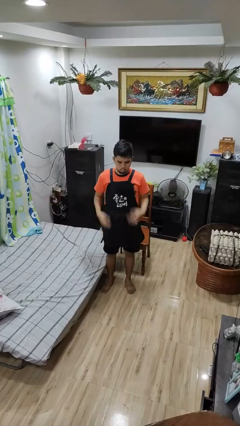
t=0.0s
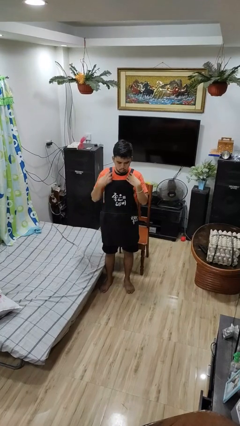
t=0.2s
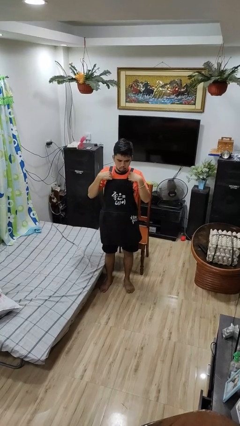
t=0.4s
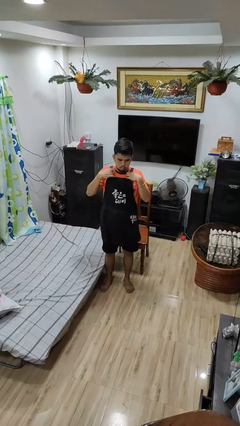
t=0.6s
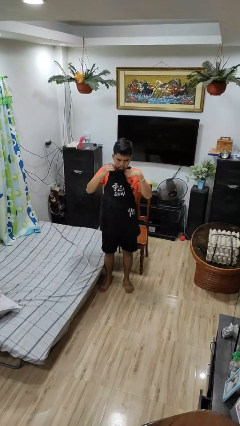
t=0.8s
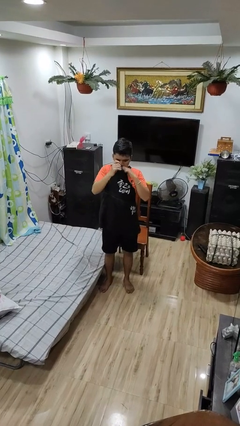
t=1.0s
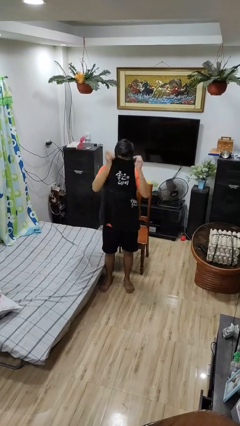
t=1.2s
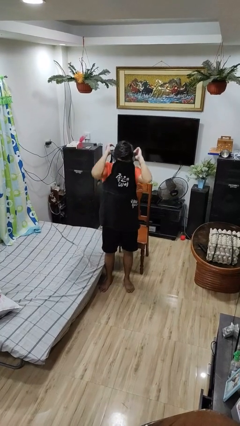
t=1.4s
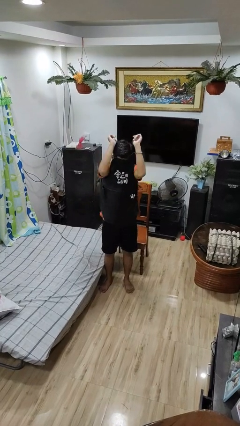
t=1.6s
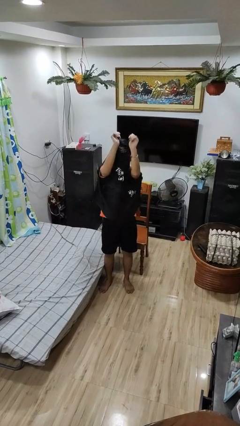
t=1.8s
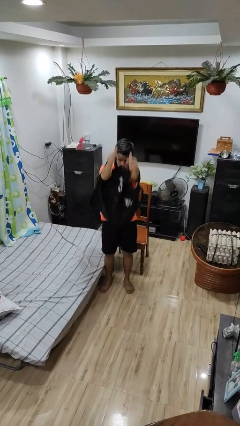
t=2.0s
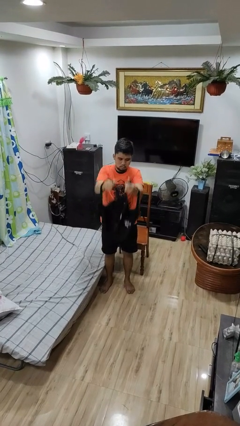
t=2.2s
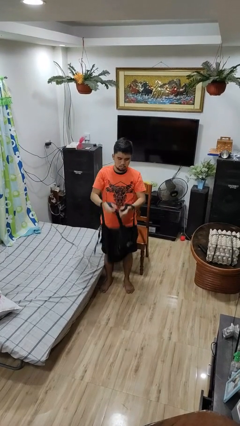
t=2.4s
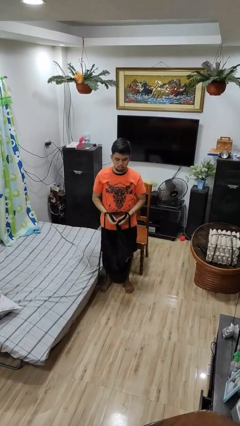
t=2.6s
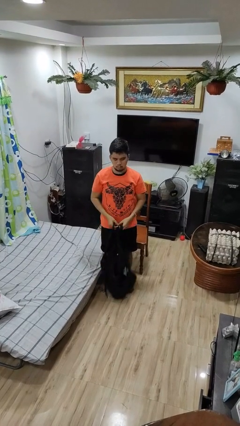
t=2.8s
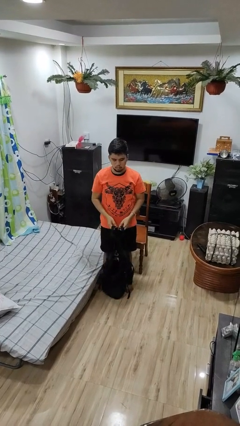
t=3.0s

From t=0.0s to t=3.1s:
person takes off apron

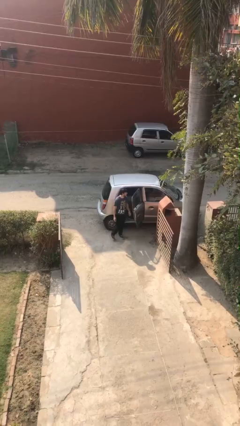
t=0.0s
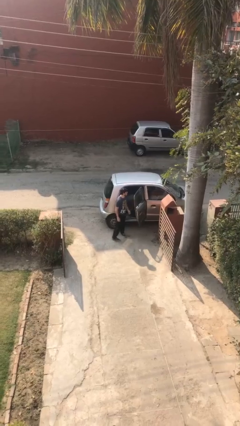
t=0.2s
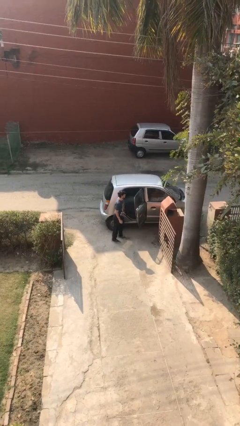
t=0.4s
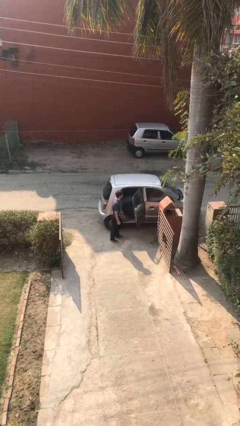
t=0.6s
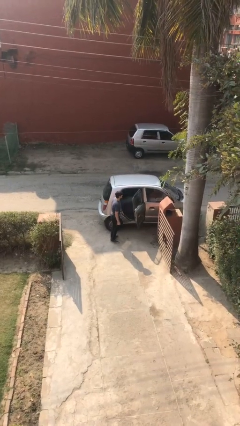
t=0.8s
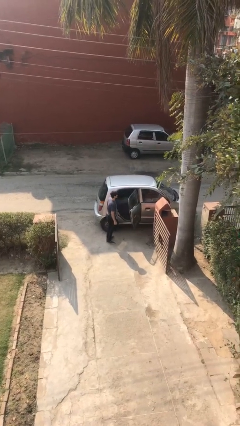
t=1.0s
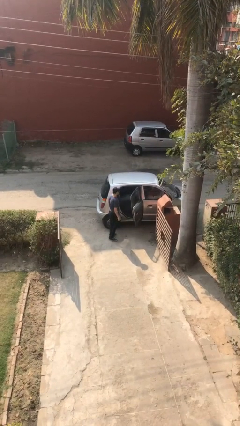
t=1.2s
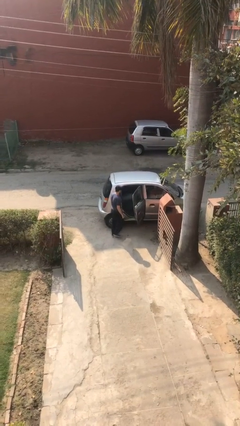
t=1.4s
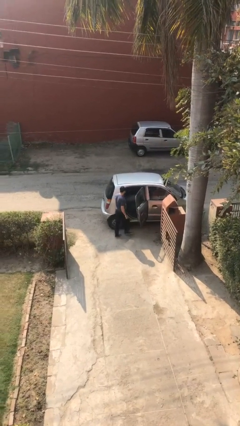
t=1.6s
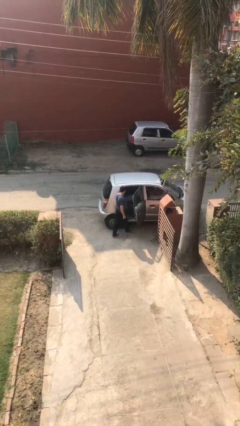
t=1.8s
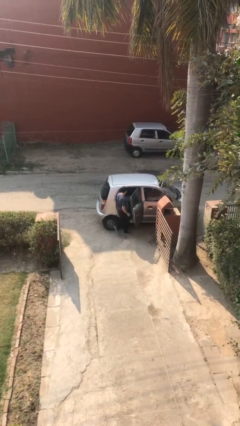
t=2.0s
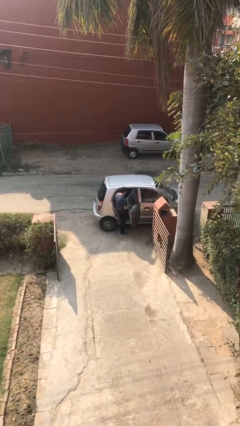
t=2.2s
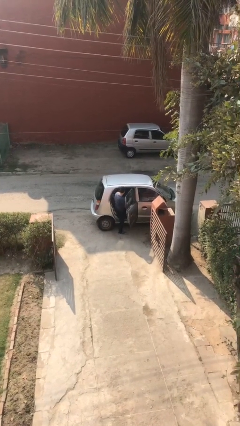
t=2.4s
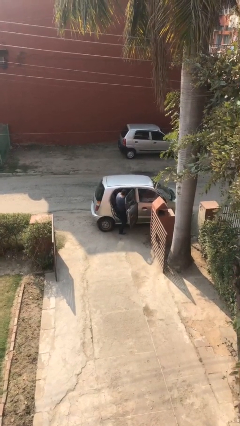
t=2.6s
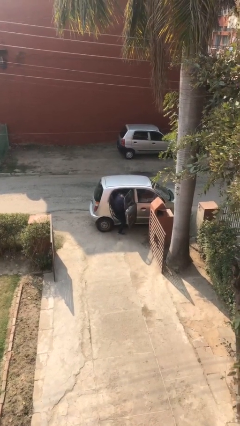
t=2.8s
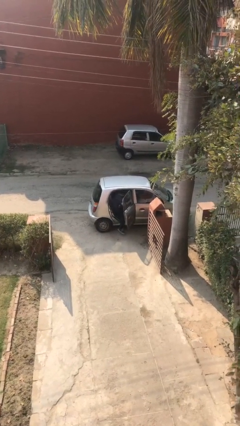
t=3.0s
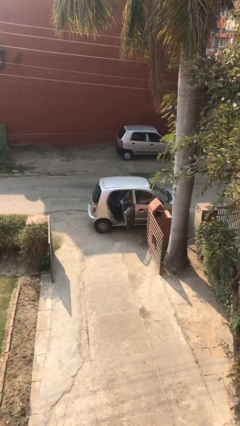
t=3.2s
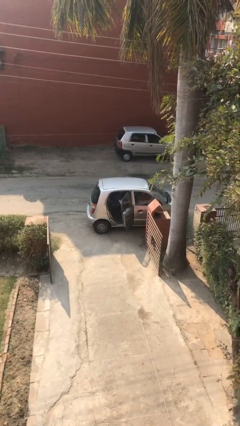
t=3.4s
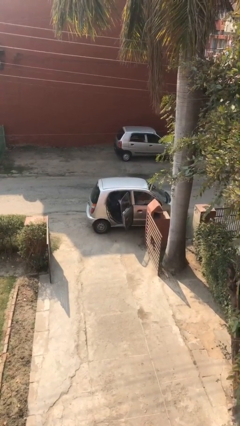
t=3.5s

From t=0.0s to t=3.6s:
person enters car

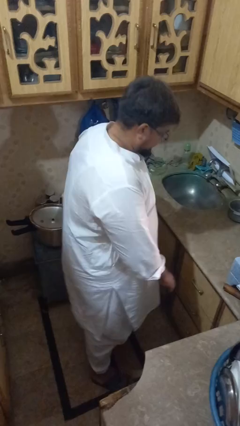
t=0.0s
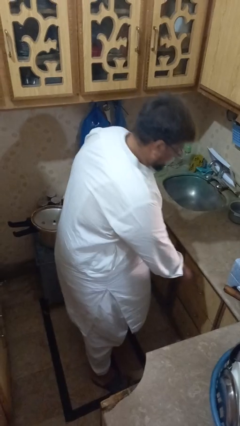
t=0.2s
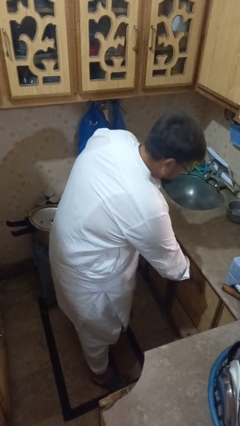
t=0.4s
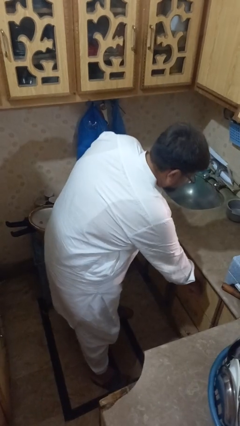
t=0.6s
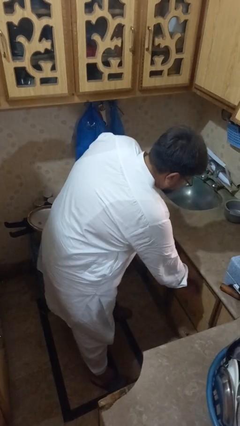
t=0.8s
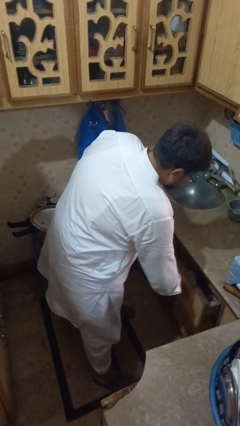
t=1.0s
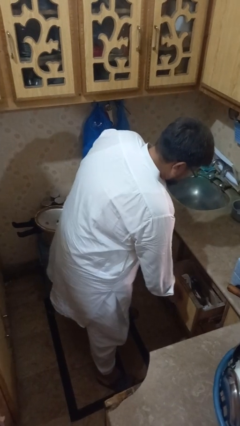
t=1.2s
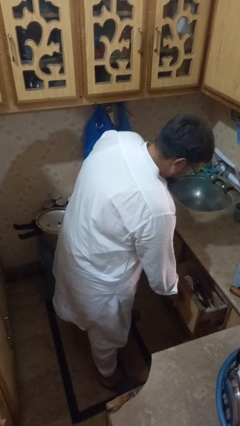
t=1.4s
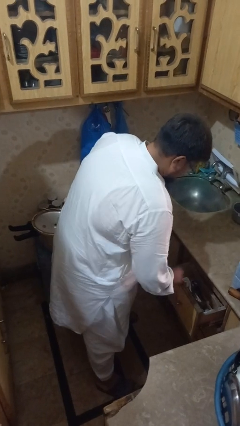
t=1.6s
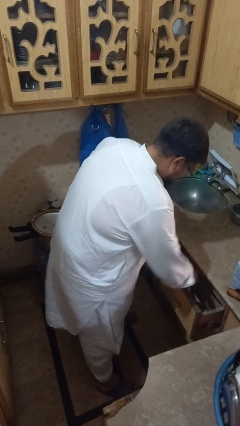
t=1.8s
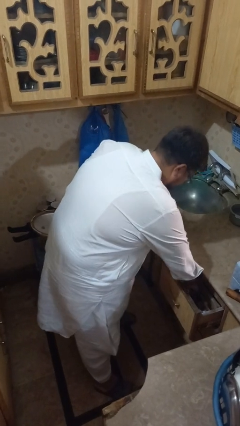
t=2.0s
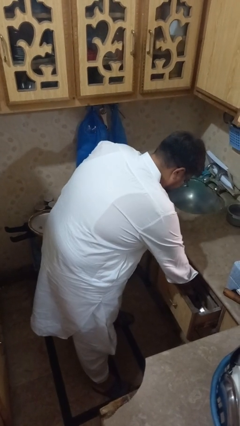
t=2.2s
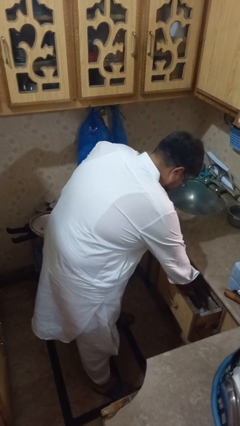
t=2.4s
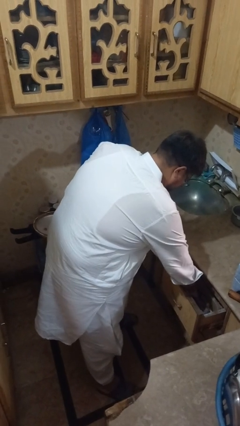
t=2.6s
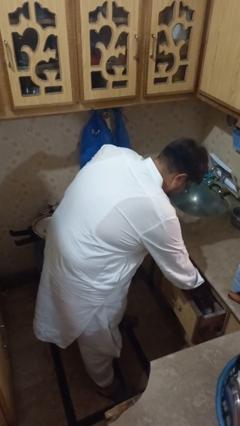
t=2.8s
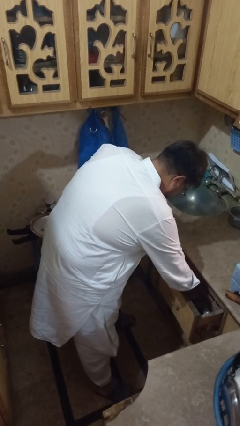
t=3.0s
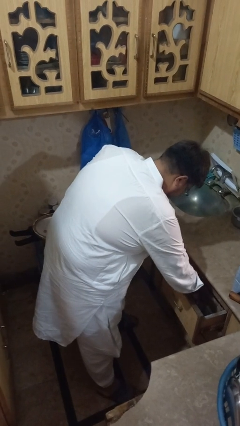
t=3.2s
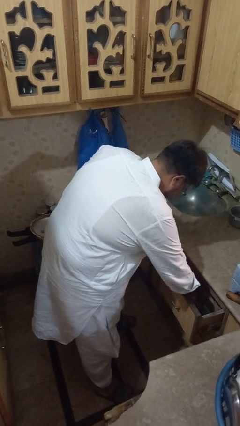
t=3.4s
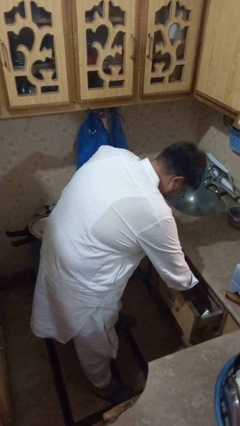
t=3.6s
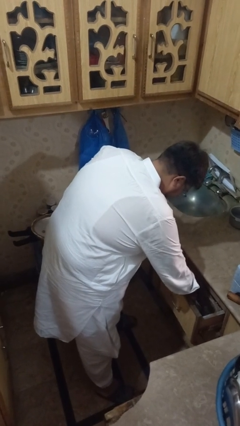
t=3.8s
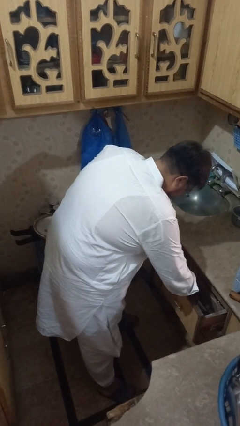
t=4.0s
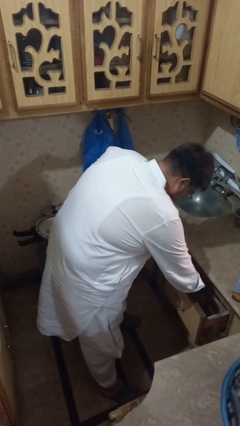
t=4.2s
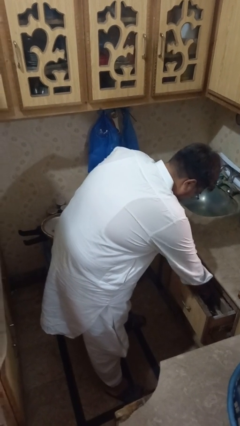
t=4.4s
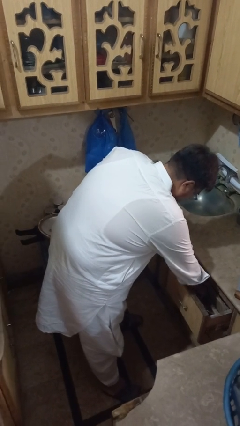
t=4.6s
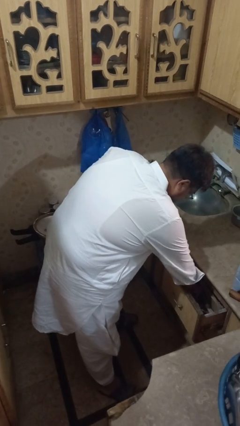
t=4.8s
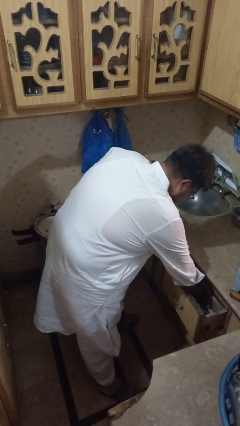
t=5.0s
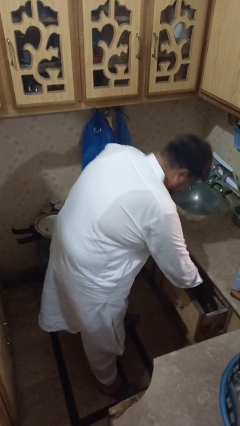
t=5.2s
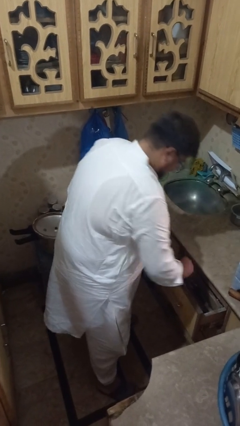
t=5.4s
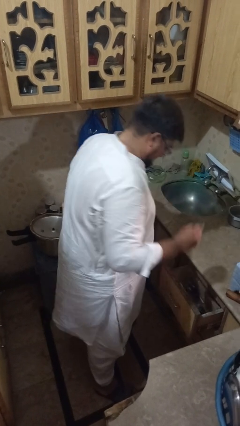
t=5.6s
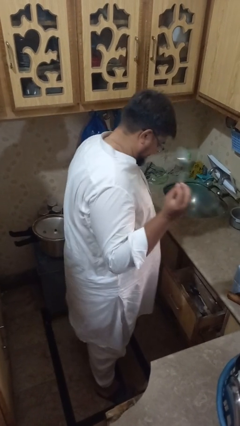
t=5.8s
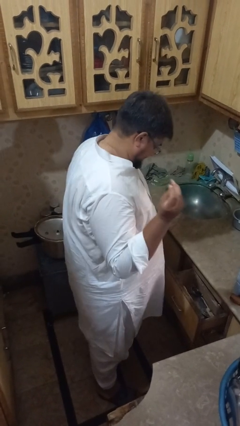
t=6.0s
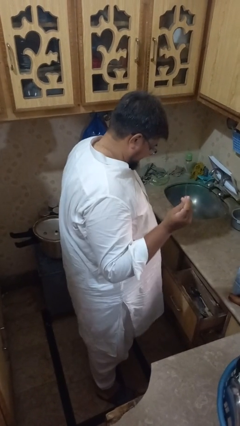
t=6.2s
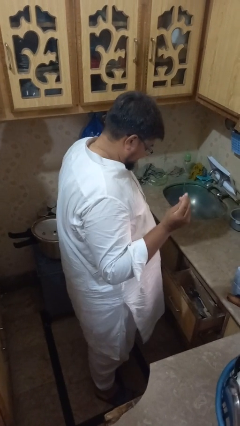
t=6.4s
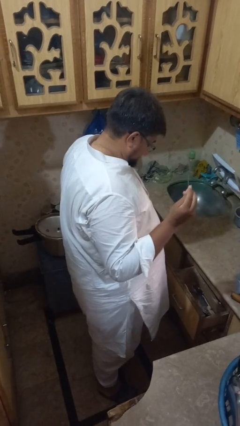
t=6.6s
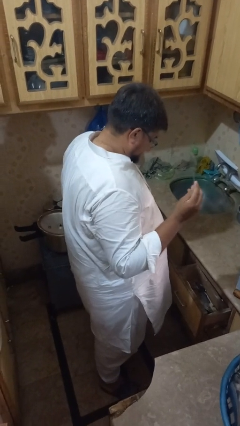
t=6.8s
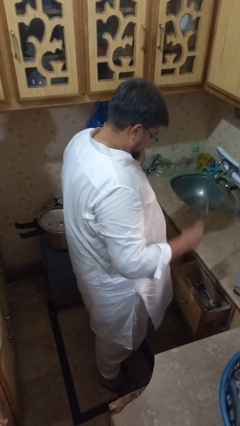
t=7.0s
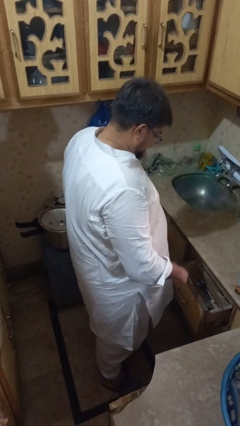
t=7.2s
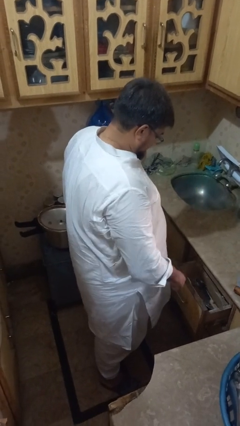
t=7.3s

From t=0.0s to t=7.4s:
person searches in kitchen drawer

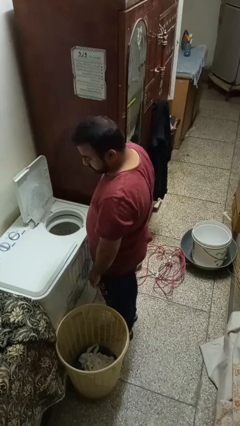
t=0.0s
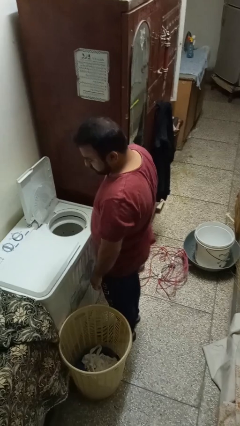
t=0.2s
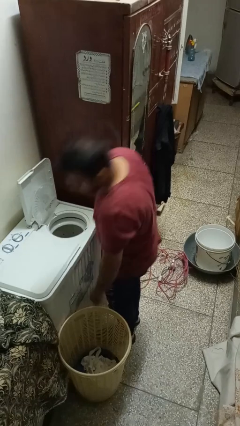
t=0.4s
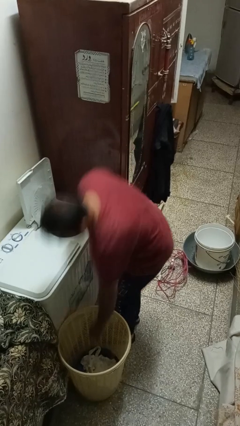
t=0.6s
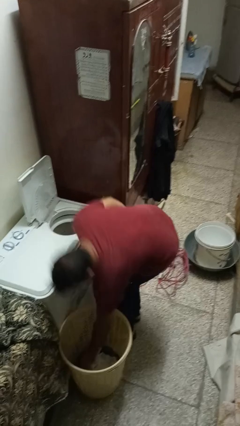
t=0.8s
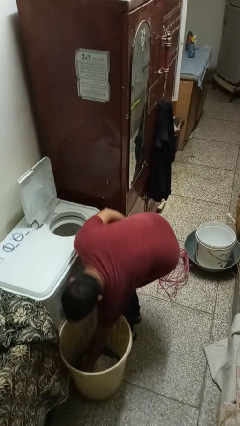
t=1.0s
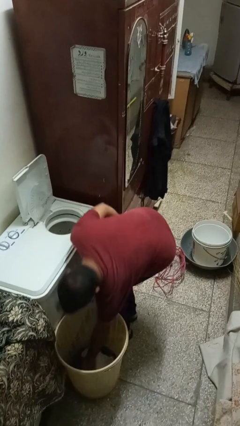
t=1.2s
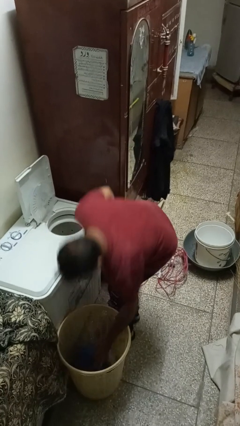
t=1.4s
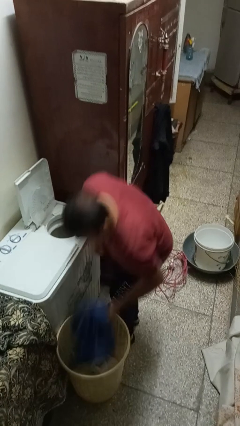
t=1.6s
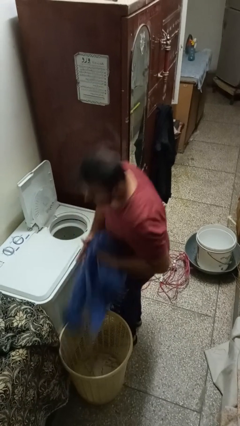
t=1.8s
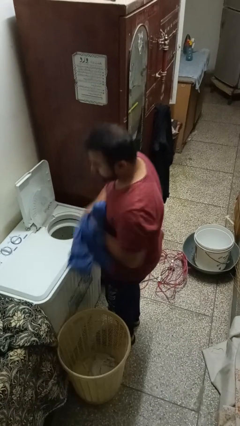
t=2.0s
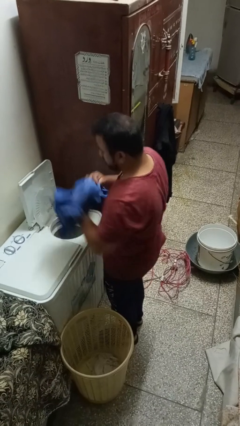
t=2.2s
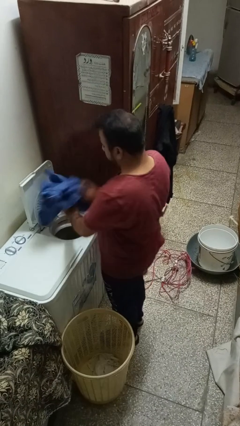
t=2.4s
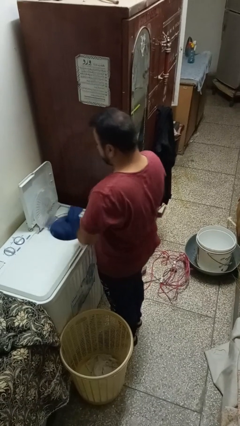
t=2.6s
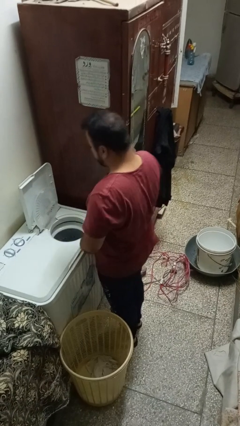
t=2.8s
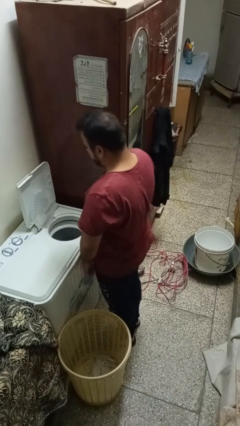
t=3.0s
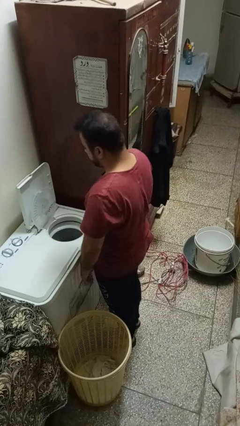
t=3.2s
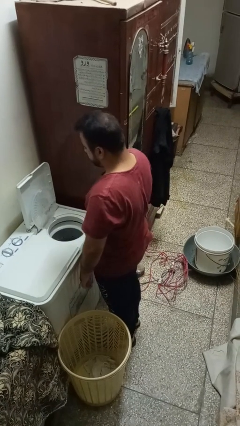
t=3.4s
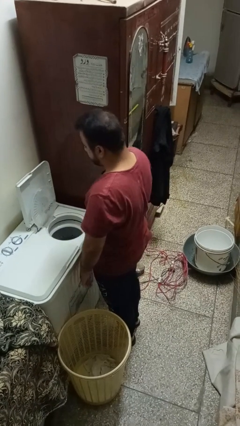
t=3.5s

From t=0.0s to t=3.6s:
person loads dryer

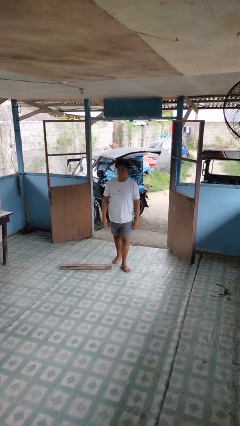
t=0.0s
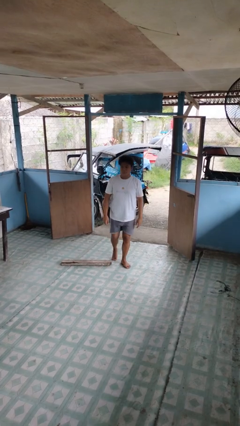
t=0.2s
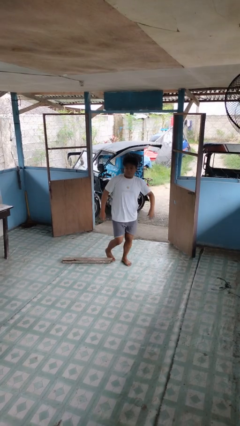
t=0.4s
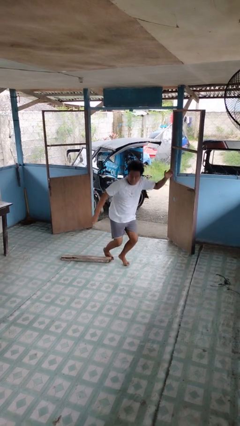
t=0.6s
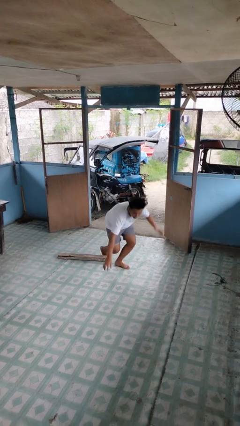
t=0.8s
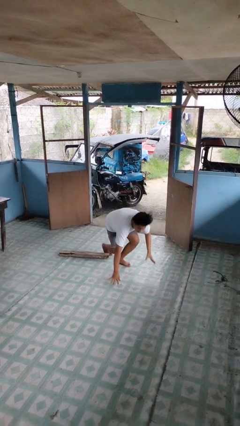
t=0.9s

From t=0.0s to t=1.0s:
person trips on object on floor
